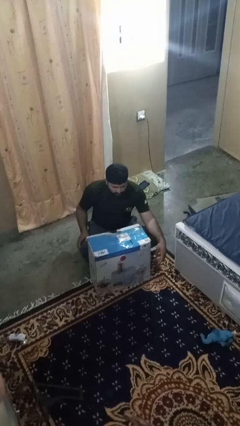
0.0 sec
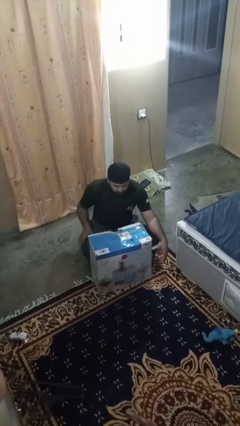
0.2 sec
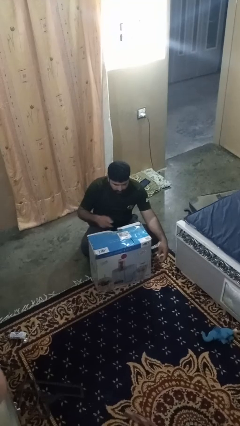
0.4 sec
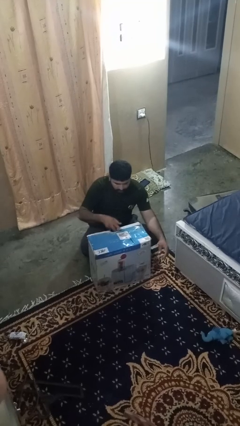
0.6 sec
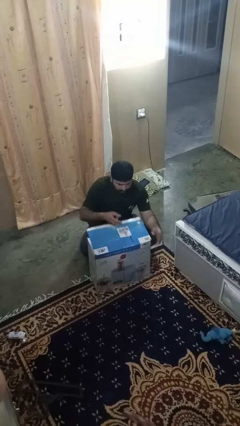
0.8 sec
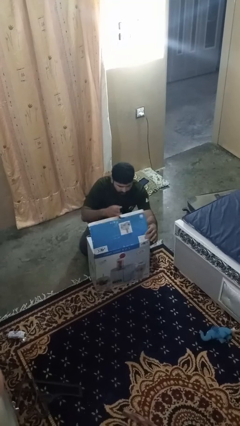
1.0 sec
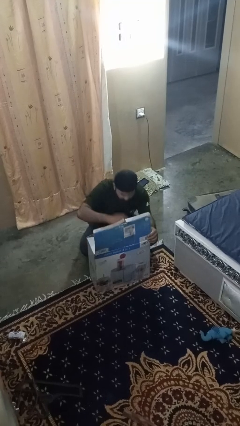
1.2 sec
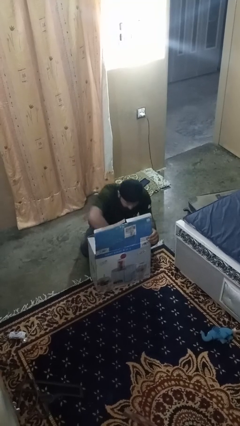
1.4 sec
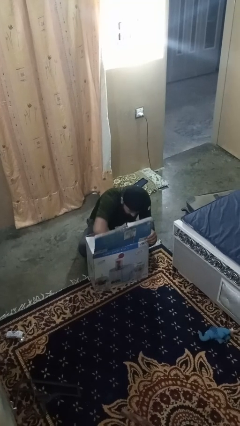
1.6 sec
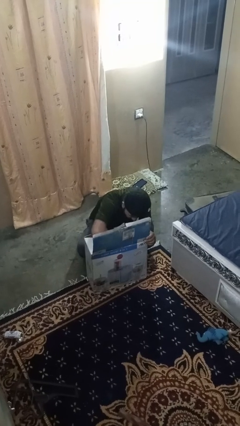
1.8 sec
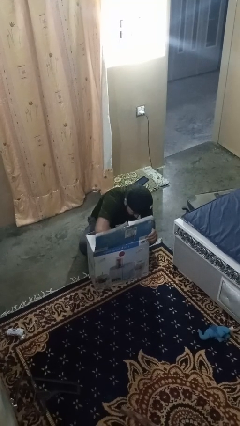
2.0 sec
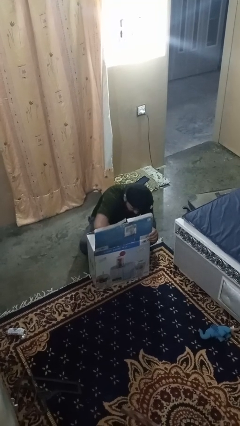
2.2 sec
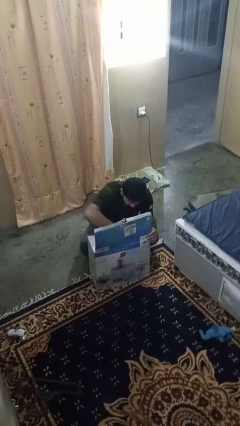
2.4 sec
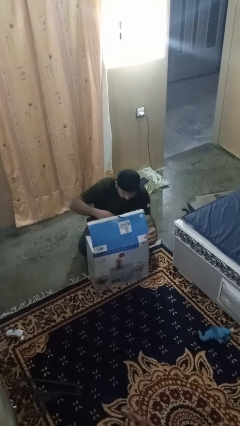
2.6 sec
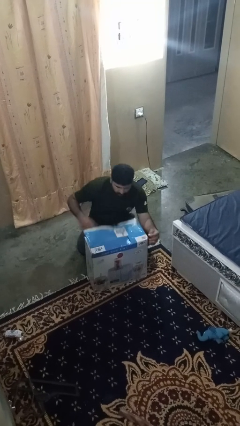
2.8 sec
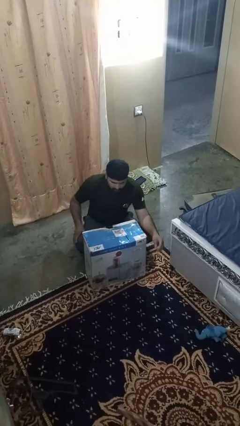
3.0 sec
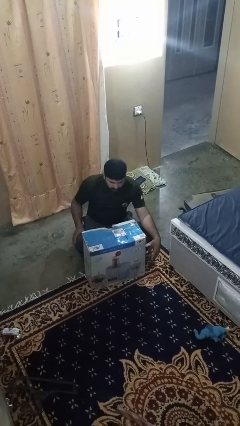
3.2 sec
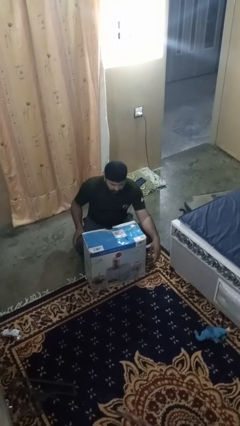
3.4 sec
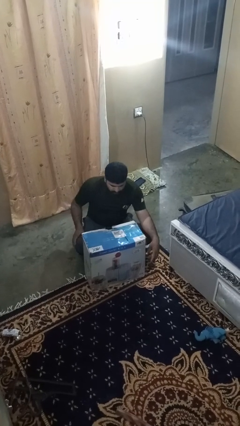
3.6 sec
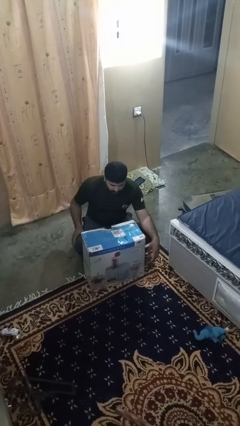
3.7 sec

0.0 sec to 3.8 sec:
person searches in box

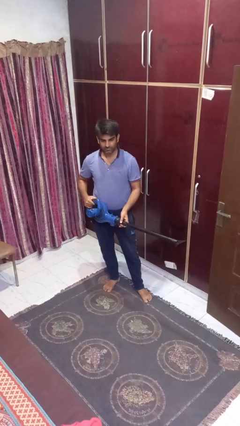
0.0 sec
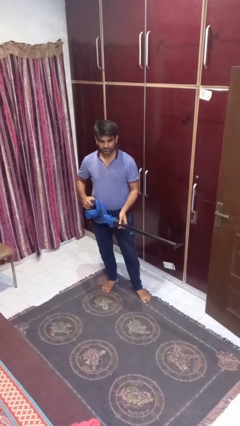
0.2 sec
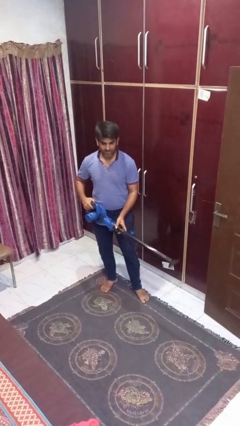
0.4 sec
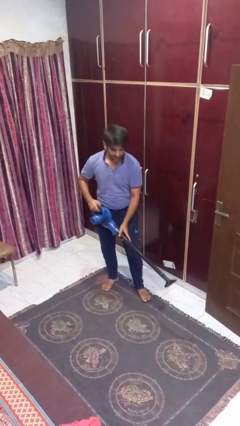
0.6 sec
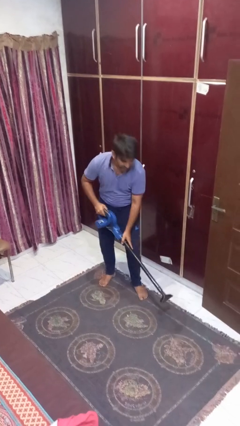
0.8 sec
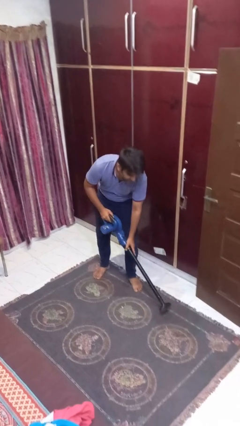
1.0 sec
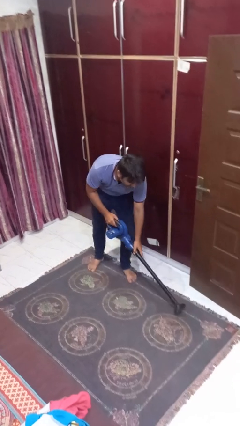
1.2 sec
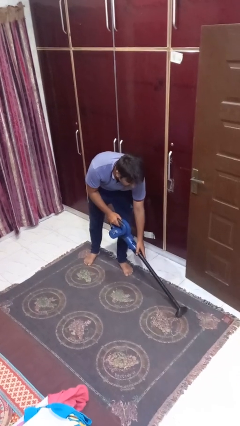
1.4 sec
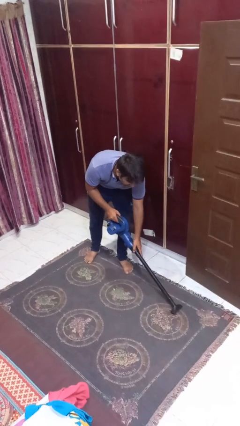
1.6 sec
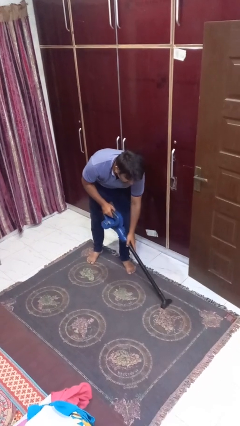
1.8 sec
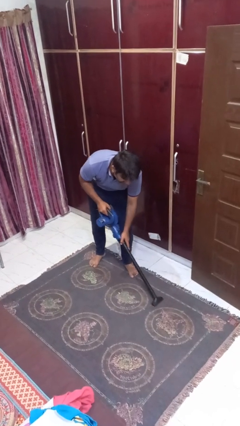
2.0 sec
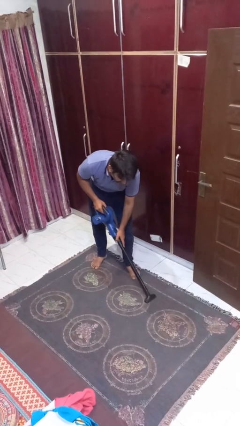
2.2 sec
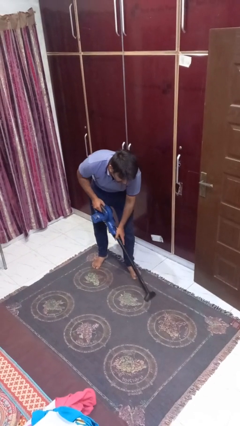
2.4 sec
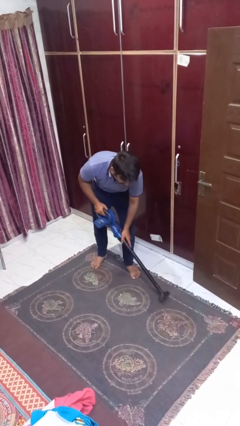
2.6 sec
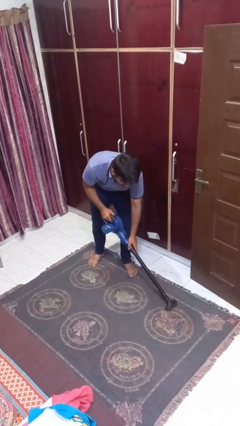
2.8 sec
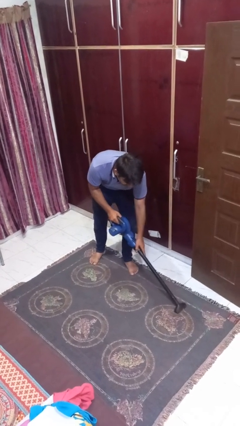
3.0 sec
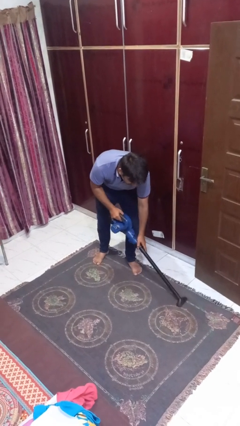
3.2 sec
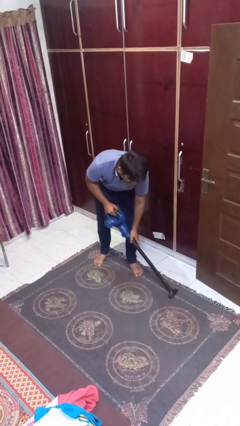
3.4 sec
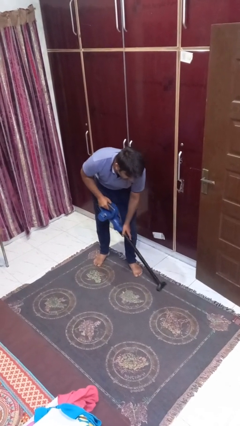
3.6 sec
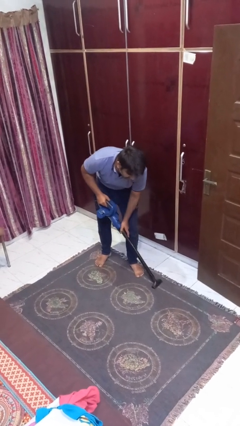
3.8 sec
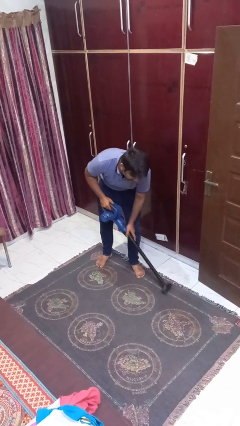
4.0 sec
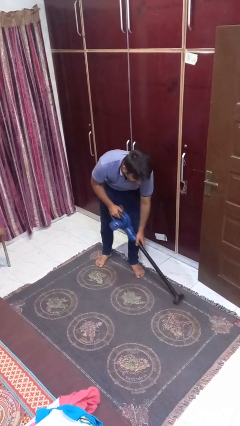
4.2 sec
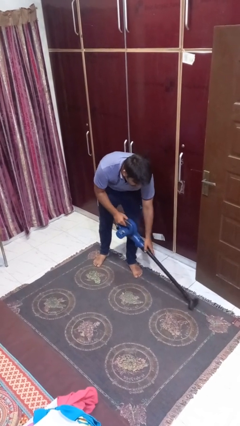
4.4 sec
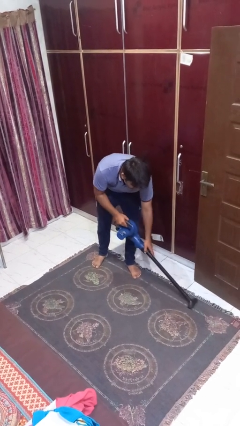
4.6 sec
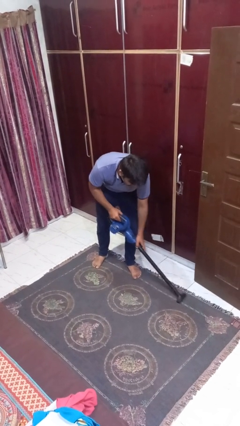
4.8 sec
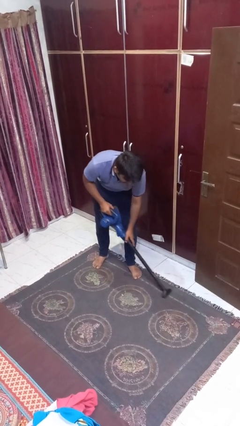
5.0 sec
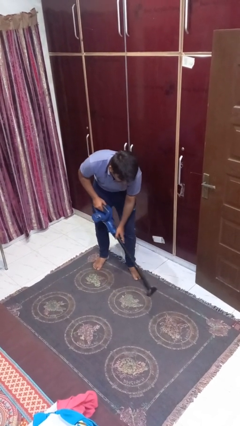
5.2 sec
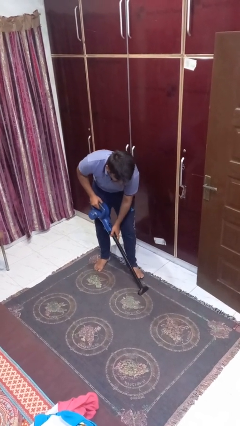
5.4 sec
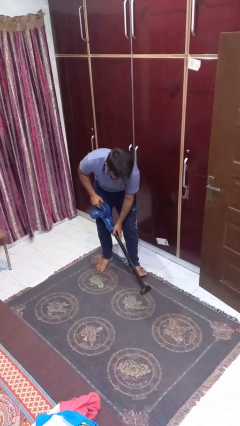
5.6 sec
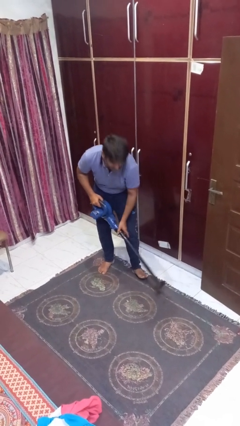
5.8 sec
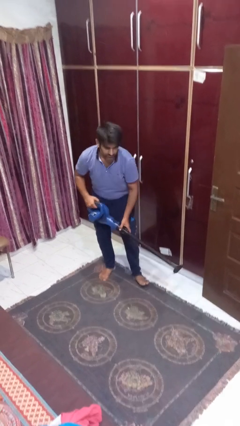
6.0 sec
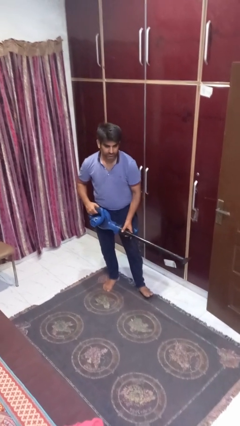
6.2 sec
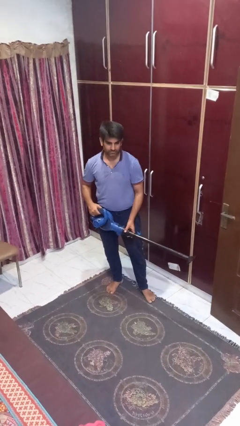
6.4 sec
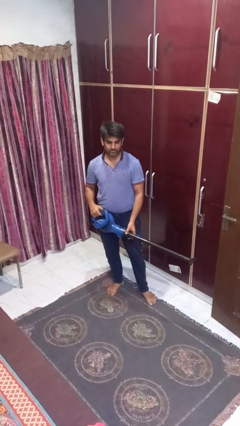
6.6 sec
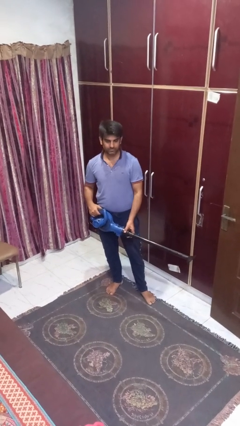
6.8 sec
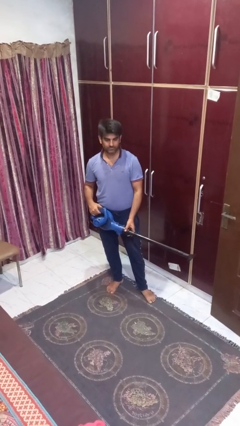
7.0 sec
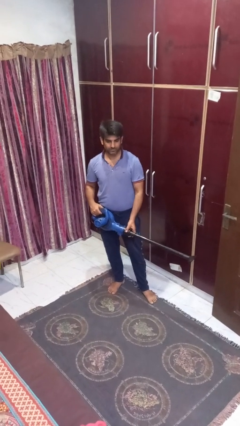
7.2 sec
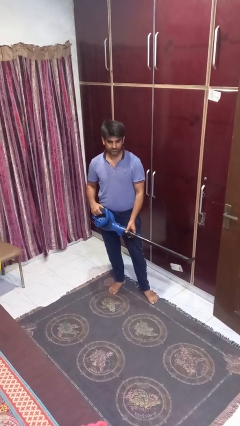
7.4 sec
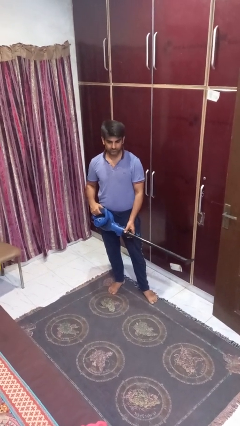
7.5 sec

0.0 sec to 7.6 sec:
person vacuums carpet

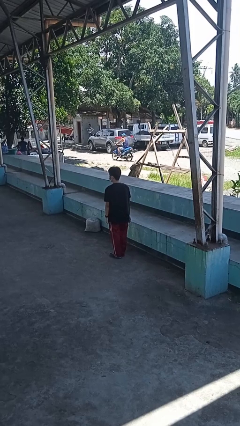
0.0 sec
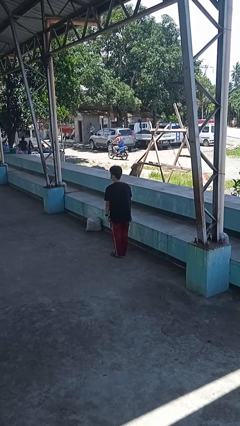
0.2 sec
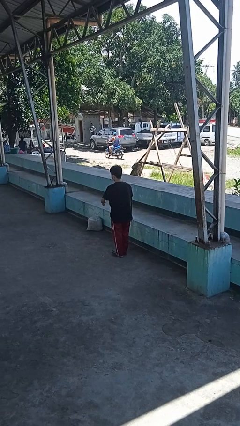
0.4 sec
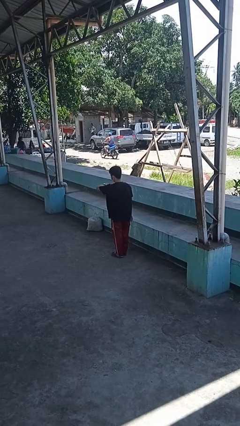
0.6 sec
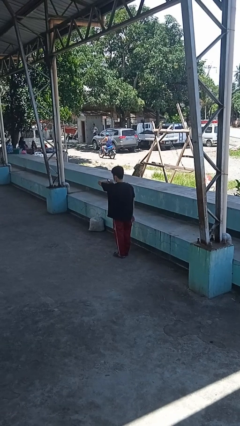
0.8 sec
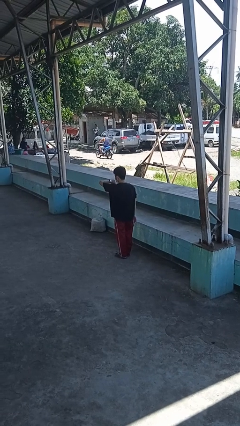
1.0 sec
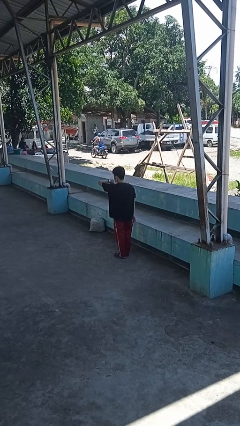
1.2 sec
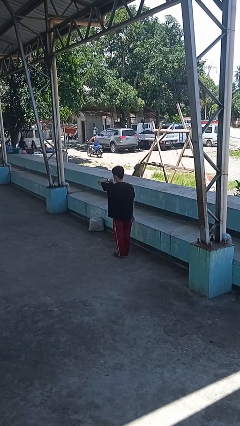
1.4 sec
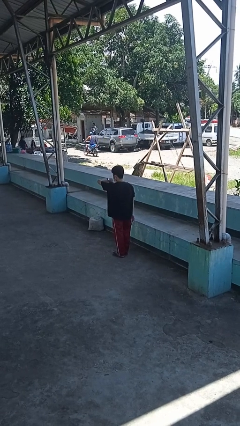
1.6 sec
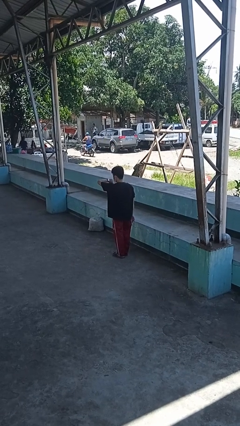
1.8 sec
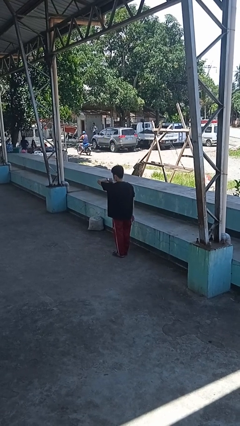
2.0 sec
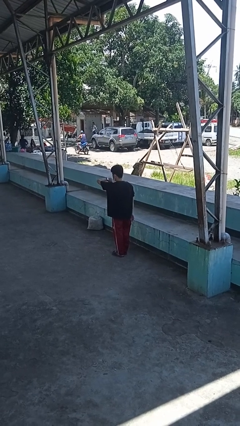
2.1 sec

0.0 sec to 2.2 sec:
person looks at wristwatch

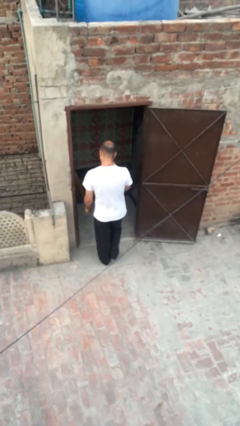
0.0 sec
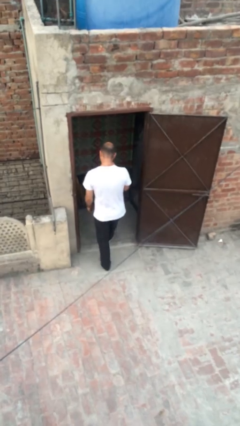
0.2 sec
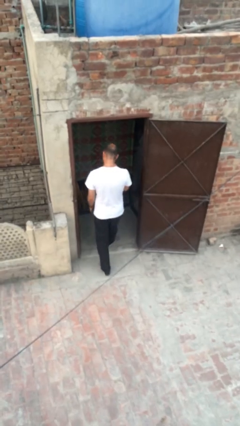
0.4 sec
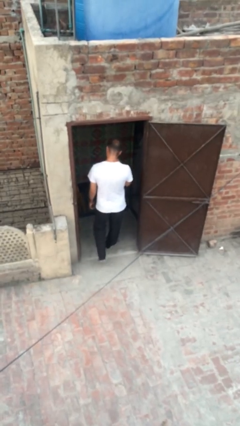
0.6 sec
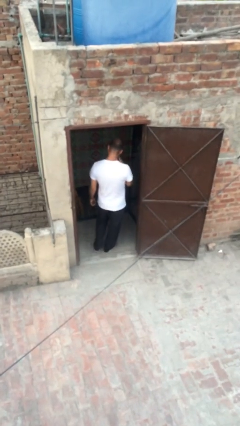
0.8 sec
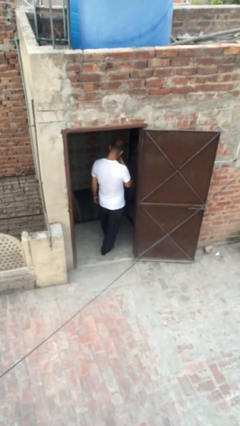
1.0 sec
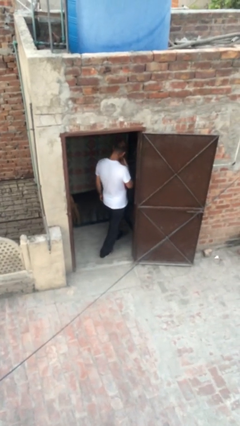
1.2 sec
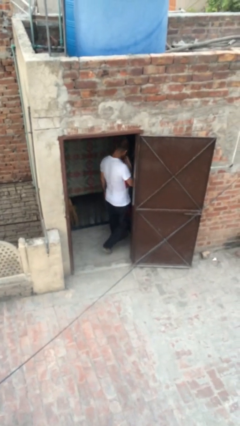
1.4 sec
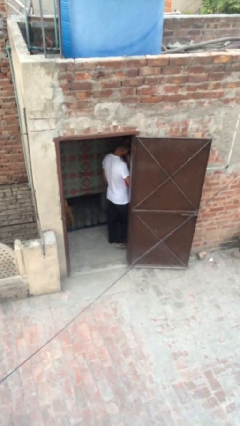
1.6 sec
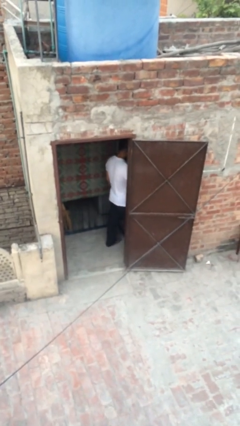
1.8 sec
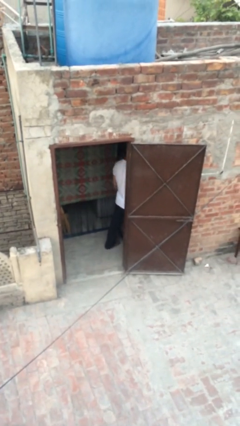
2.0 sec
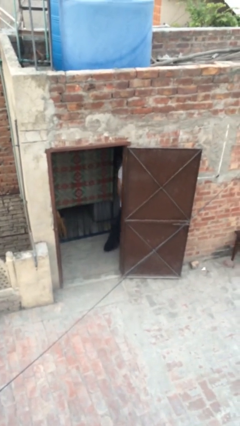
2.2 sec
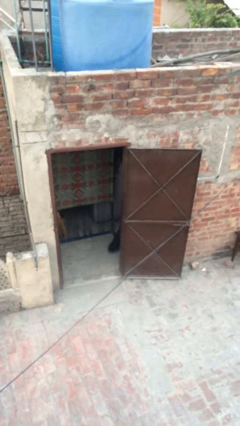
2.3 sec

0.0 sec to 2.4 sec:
person exits scene through structure

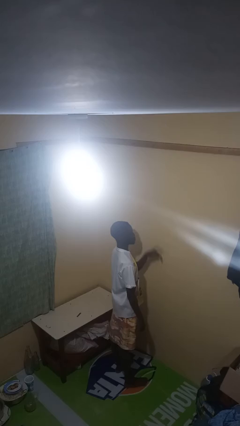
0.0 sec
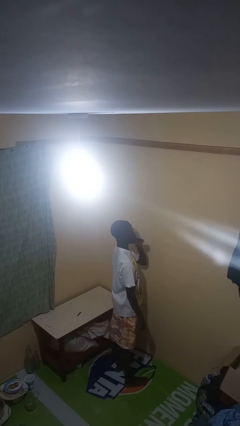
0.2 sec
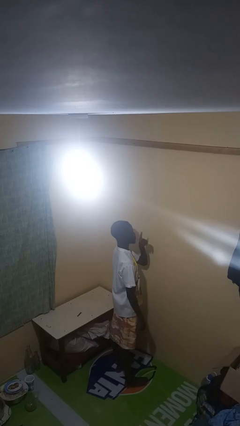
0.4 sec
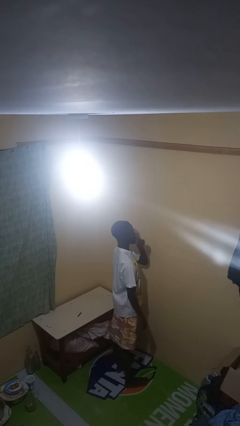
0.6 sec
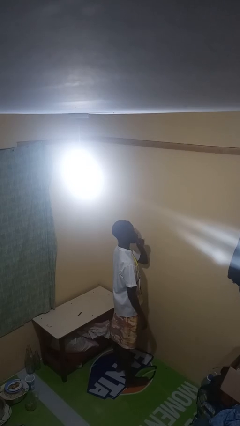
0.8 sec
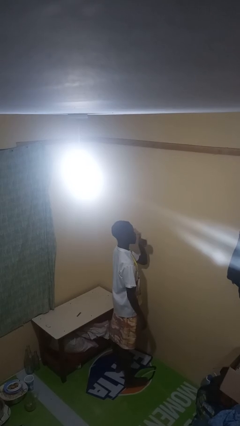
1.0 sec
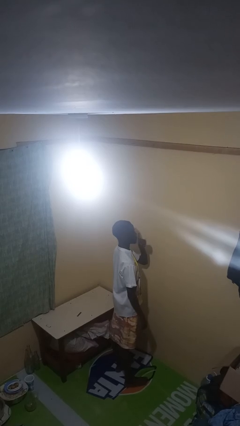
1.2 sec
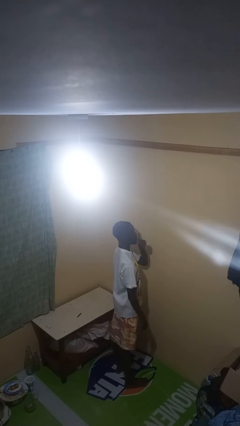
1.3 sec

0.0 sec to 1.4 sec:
person gestures be quiet

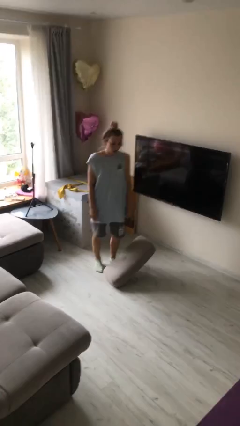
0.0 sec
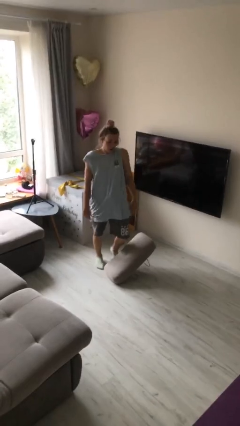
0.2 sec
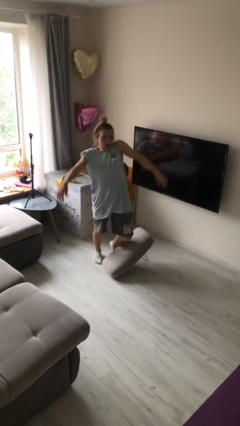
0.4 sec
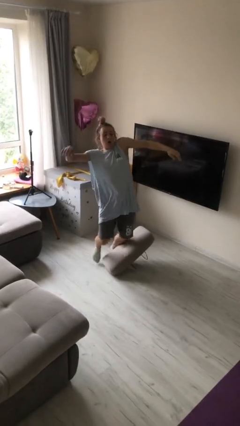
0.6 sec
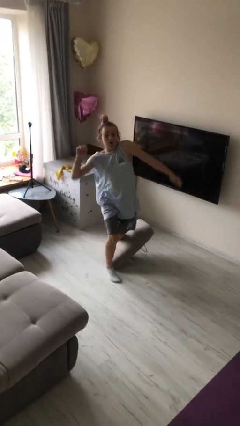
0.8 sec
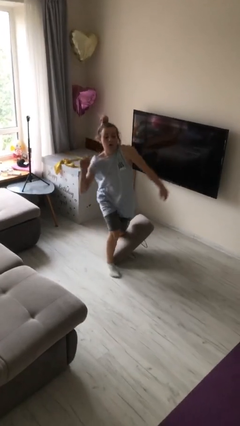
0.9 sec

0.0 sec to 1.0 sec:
person trips on object on floor
